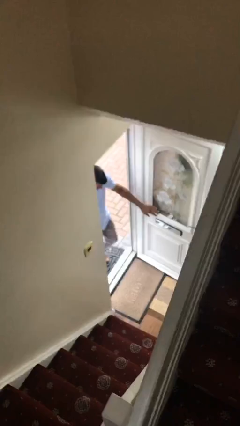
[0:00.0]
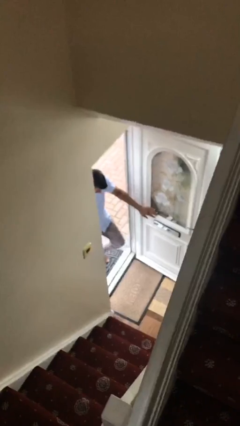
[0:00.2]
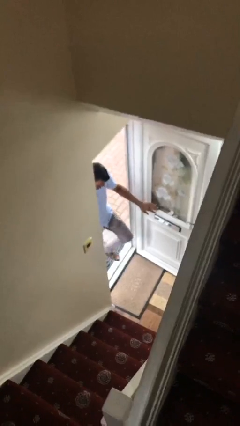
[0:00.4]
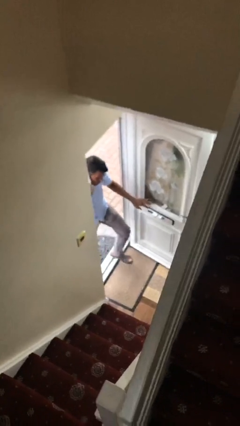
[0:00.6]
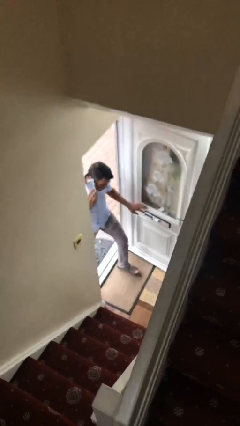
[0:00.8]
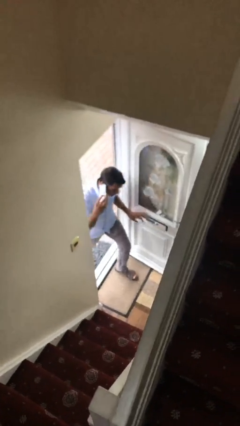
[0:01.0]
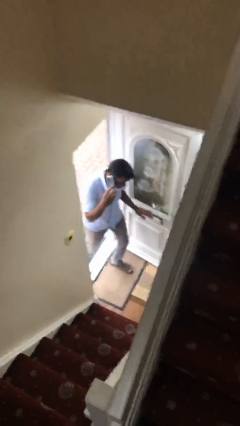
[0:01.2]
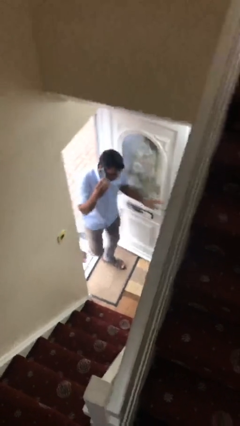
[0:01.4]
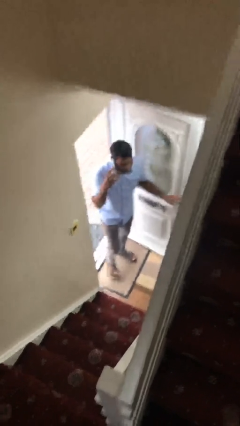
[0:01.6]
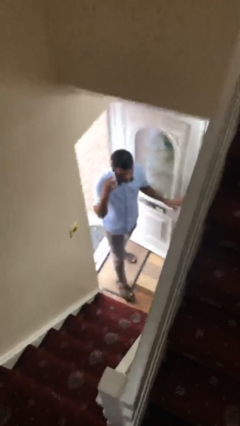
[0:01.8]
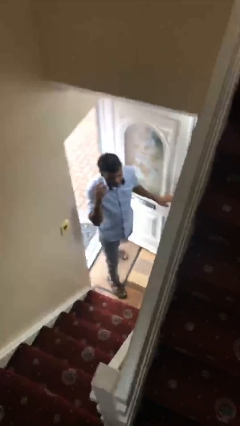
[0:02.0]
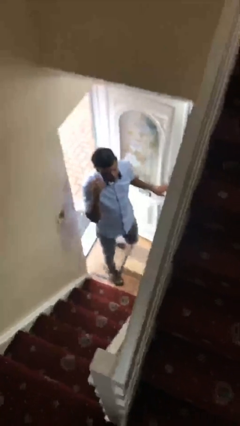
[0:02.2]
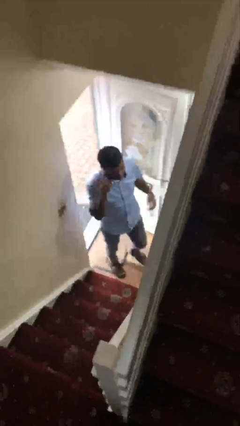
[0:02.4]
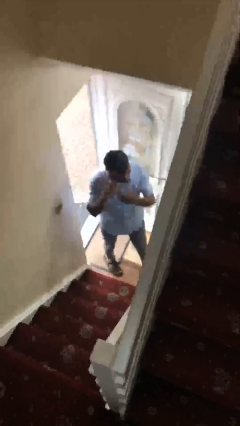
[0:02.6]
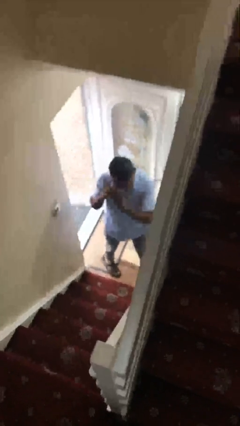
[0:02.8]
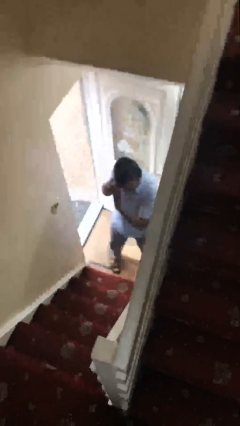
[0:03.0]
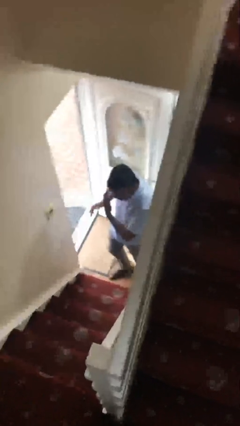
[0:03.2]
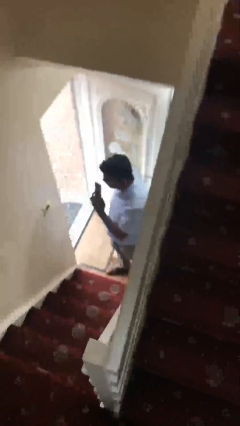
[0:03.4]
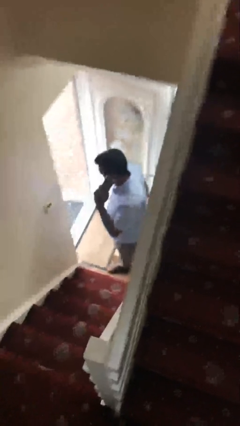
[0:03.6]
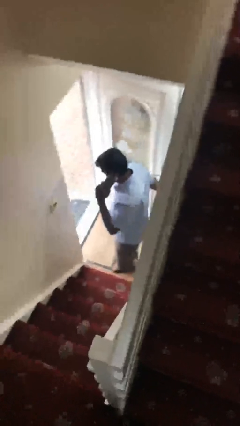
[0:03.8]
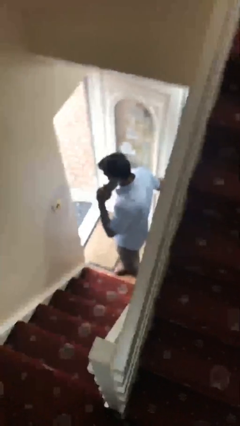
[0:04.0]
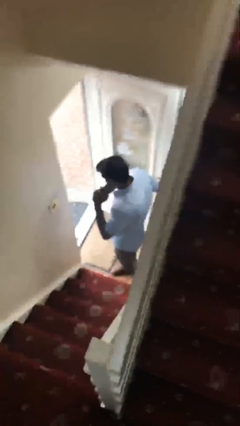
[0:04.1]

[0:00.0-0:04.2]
person enters scene through structure

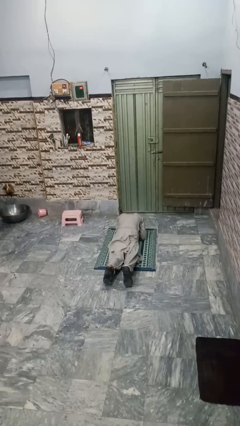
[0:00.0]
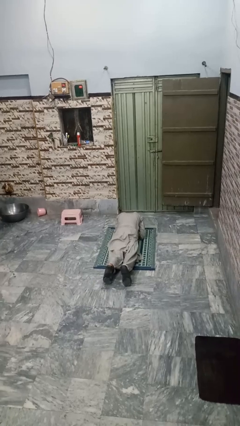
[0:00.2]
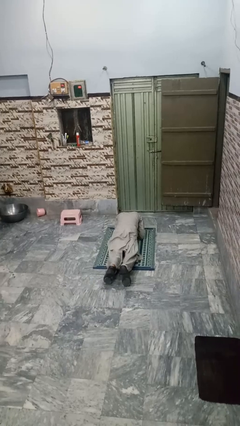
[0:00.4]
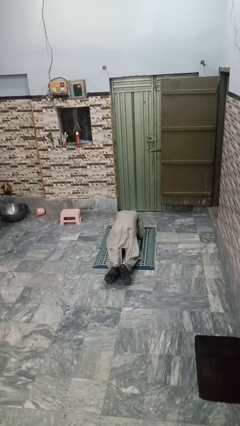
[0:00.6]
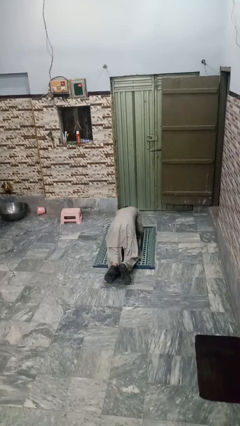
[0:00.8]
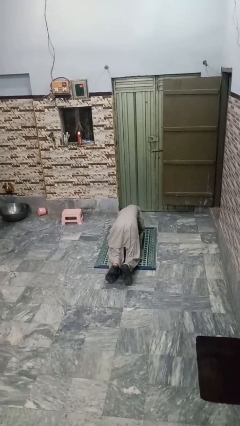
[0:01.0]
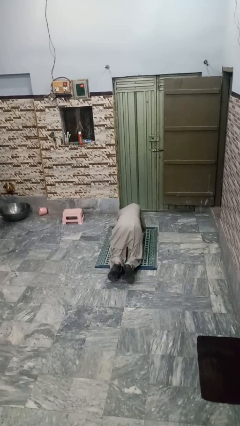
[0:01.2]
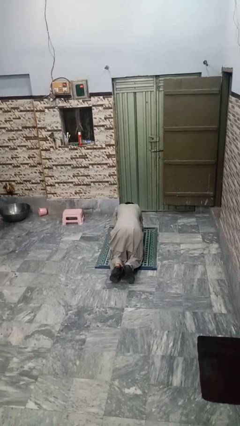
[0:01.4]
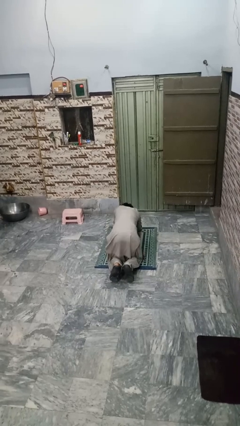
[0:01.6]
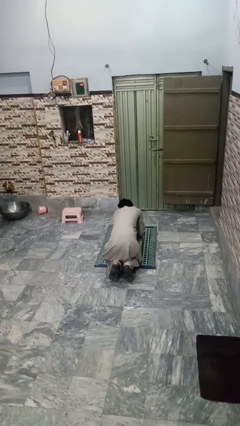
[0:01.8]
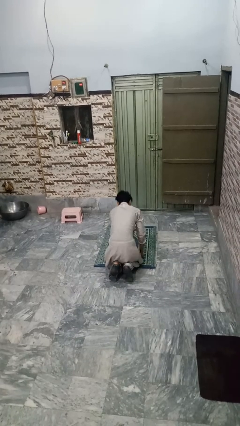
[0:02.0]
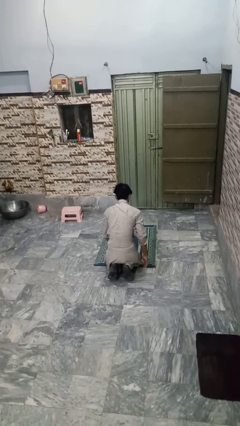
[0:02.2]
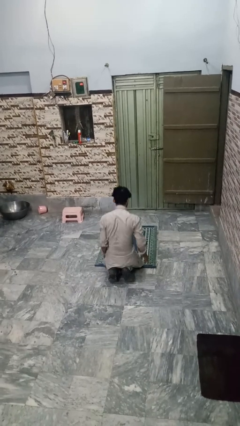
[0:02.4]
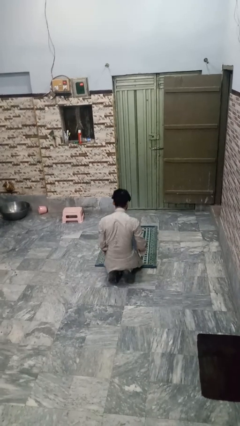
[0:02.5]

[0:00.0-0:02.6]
person stands up from floor

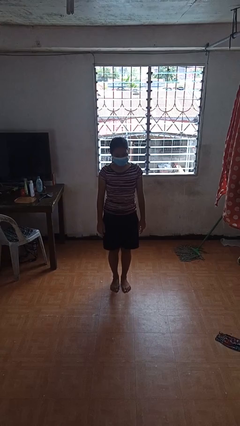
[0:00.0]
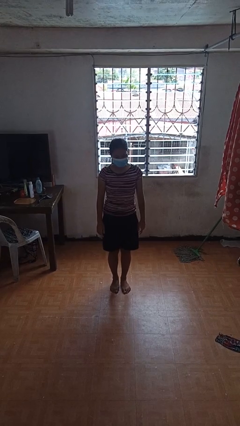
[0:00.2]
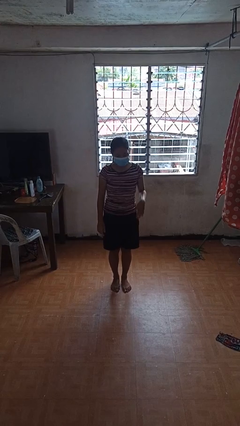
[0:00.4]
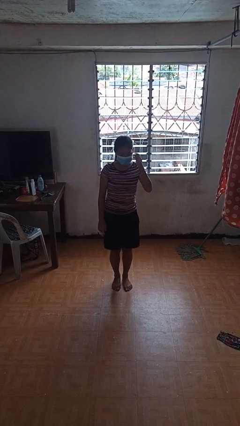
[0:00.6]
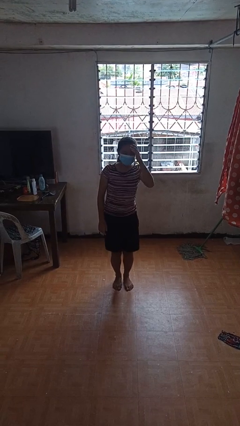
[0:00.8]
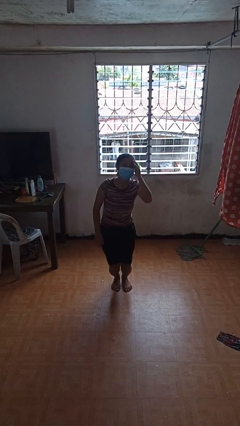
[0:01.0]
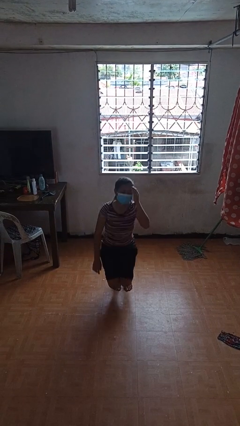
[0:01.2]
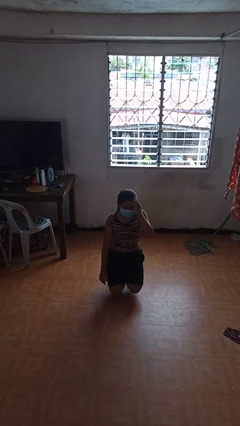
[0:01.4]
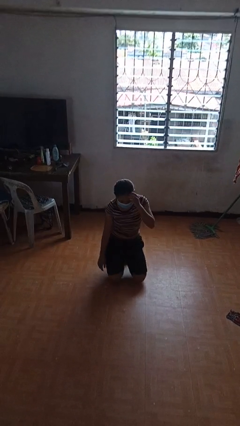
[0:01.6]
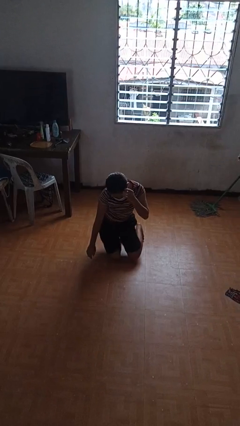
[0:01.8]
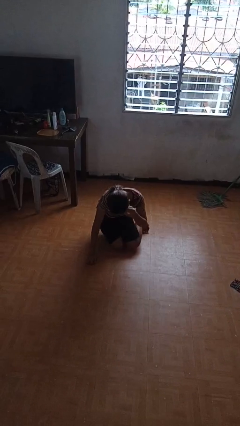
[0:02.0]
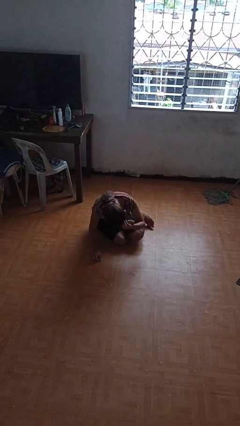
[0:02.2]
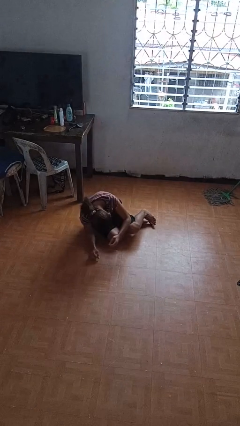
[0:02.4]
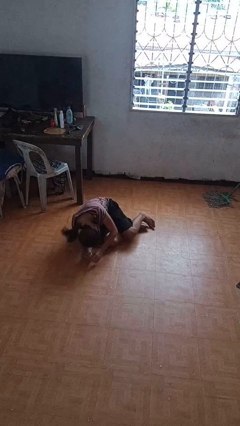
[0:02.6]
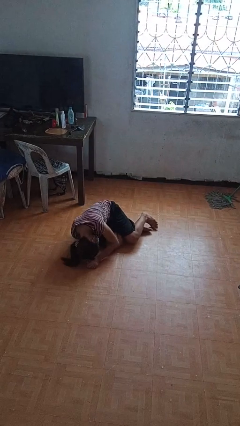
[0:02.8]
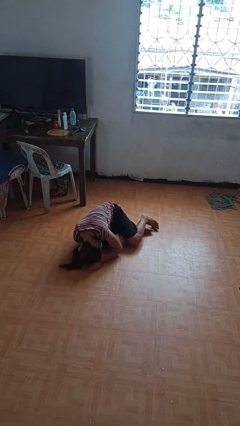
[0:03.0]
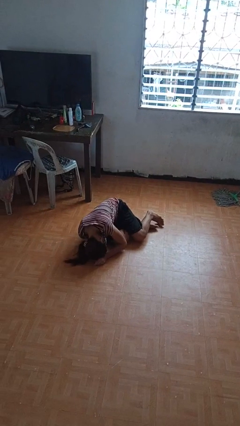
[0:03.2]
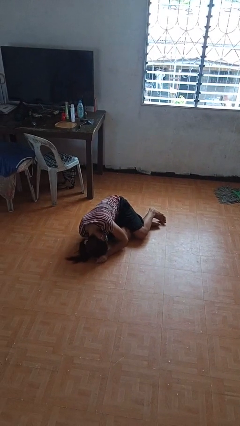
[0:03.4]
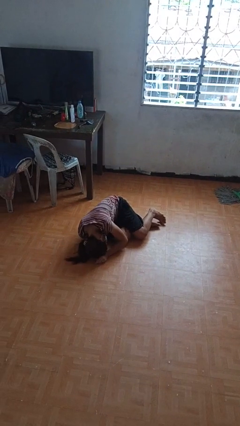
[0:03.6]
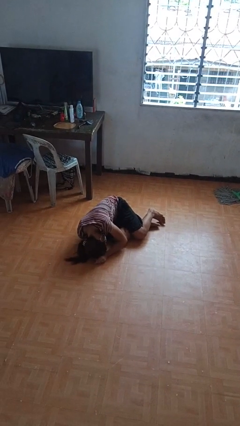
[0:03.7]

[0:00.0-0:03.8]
person falls while standing

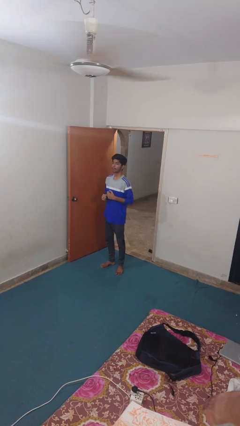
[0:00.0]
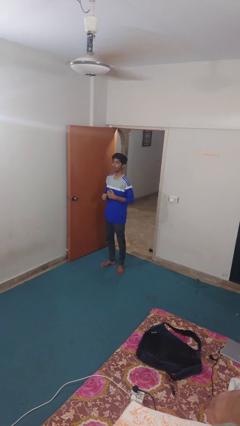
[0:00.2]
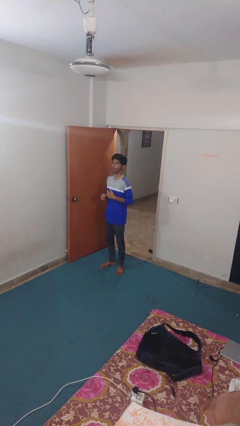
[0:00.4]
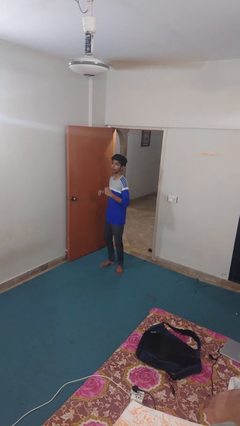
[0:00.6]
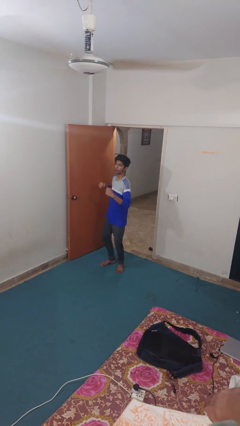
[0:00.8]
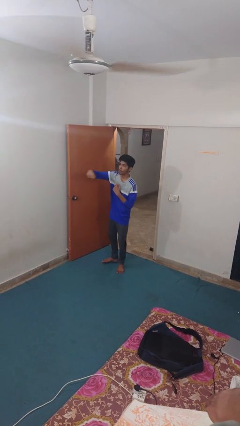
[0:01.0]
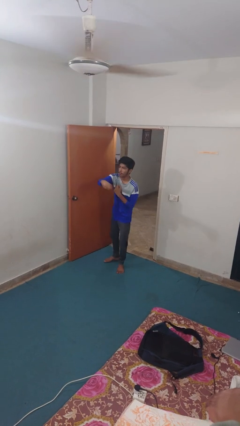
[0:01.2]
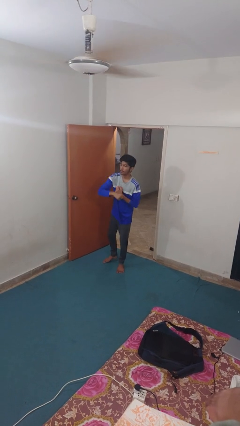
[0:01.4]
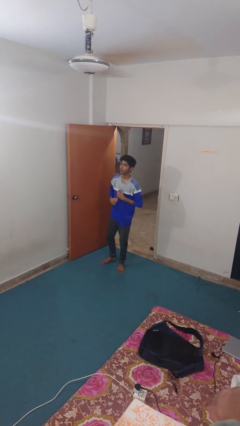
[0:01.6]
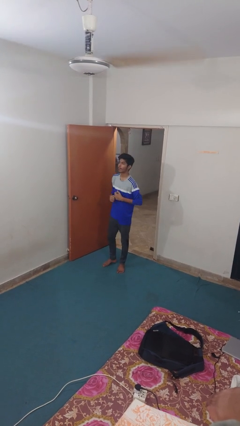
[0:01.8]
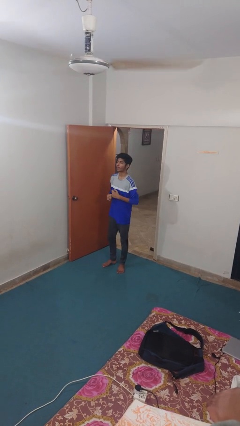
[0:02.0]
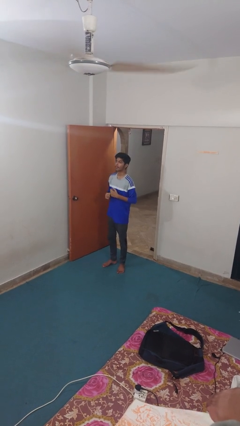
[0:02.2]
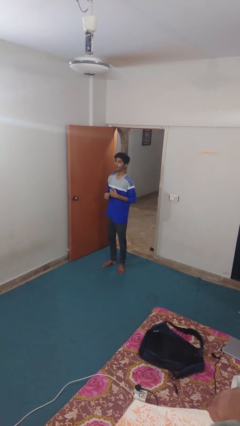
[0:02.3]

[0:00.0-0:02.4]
person punches

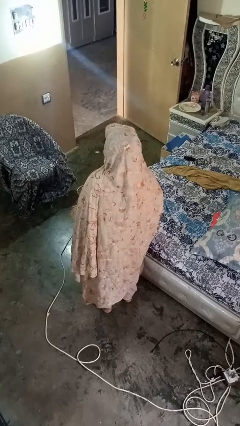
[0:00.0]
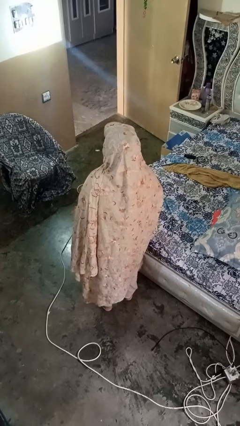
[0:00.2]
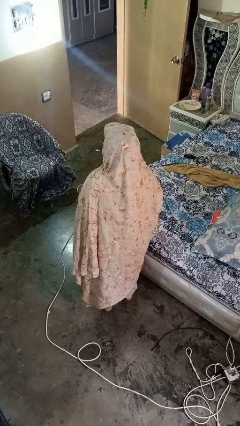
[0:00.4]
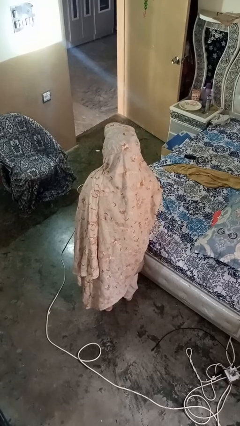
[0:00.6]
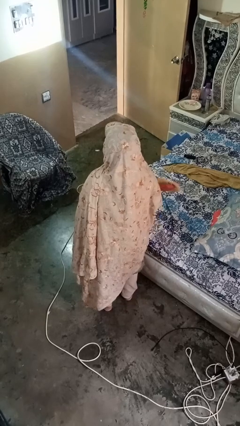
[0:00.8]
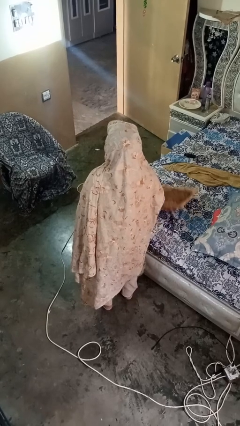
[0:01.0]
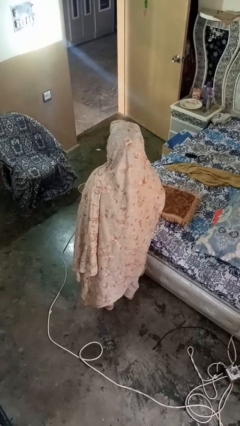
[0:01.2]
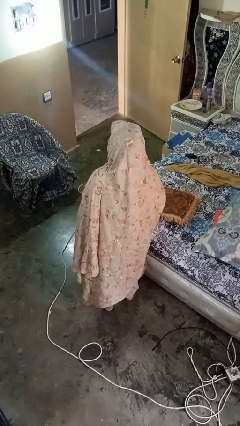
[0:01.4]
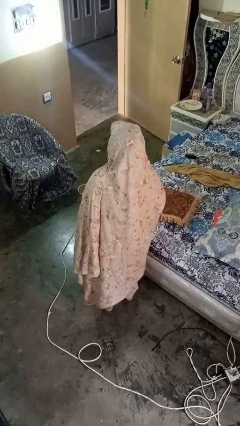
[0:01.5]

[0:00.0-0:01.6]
person puts down object on bed

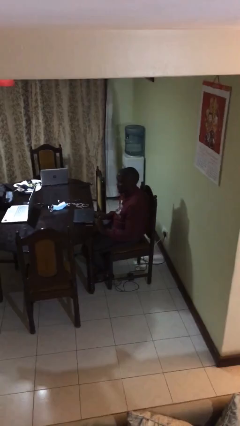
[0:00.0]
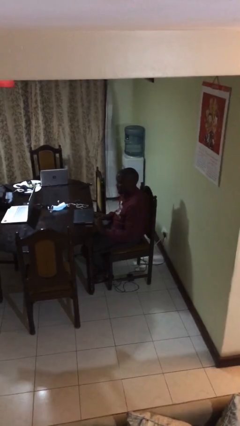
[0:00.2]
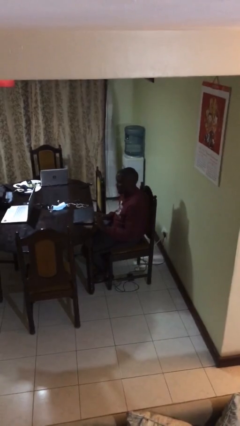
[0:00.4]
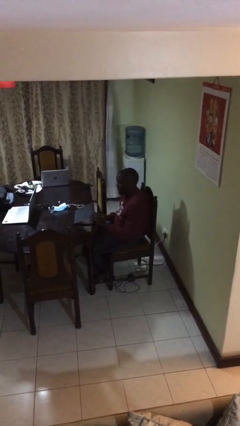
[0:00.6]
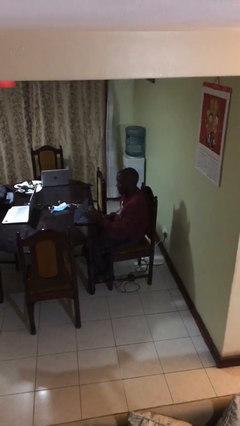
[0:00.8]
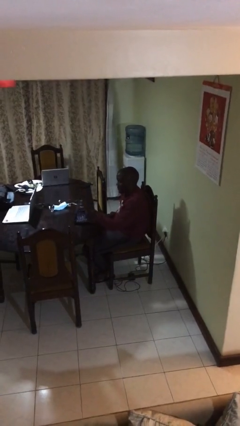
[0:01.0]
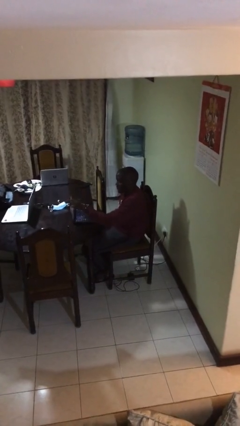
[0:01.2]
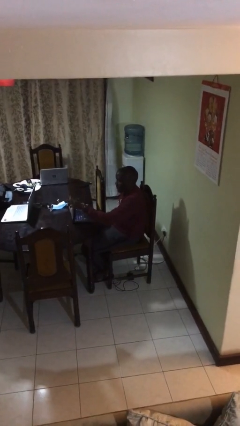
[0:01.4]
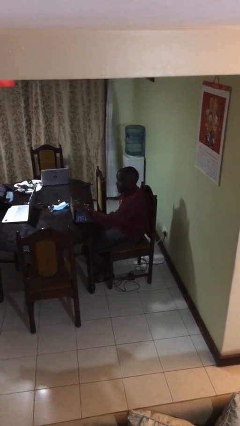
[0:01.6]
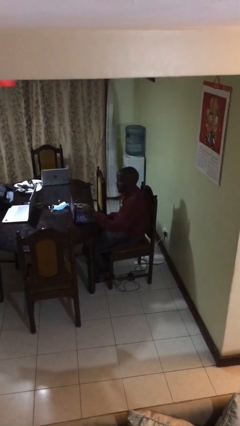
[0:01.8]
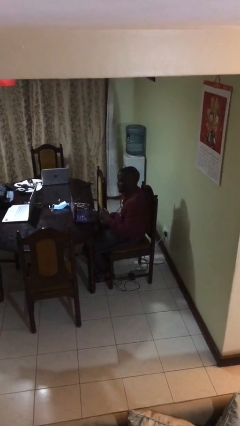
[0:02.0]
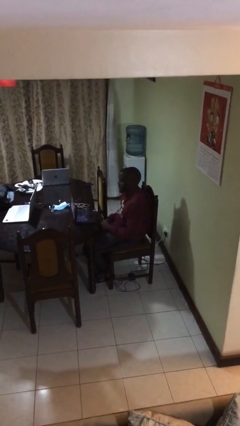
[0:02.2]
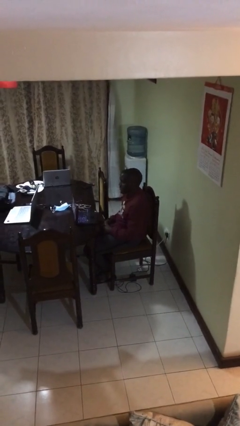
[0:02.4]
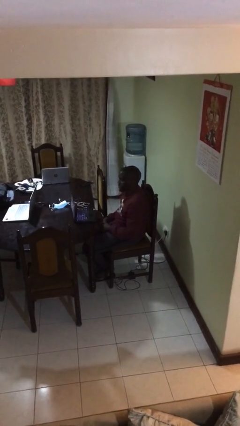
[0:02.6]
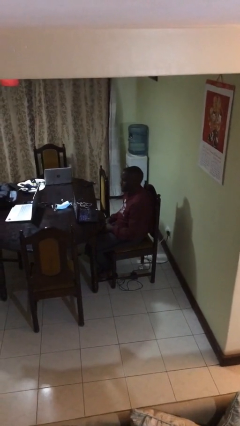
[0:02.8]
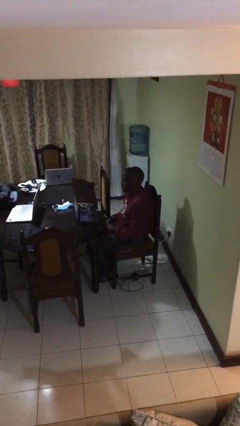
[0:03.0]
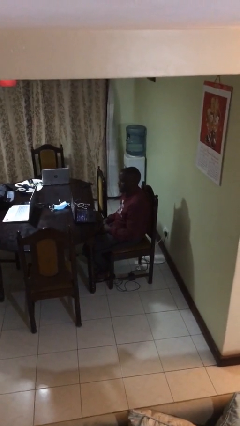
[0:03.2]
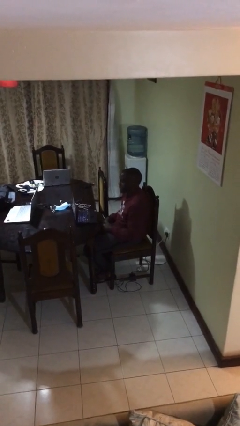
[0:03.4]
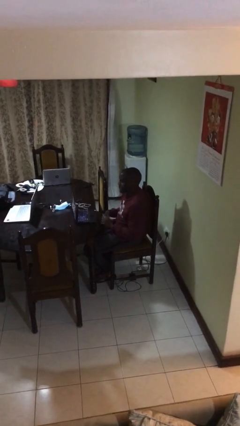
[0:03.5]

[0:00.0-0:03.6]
person opens laptop
